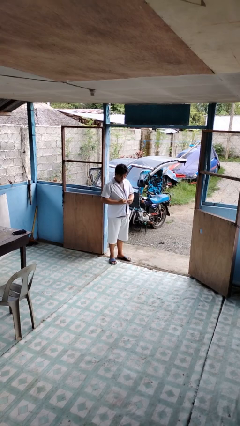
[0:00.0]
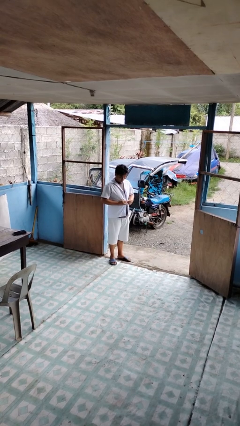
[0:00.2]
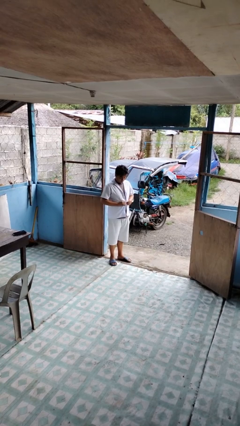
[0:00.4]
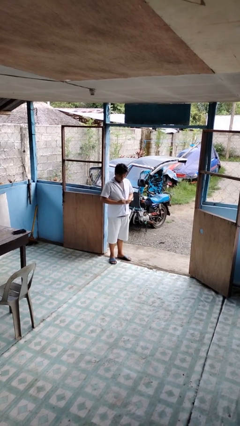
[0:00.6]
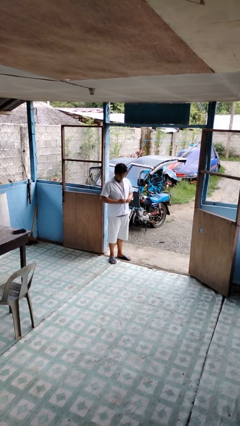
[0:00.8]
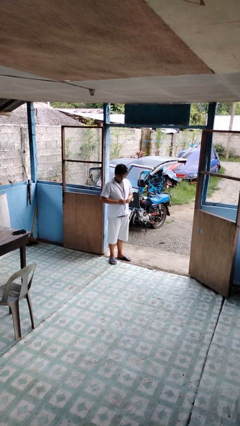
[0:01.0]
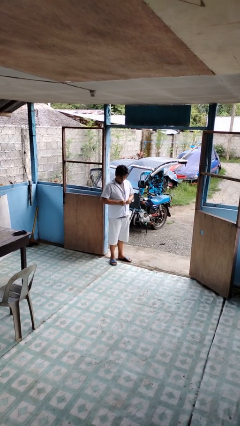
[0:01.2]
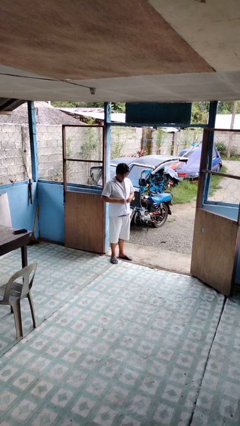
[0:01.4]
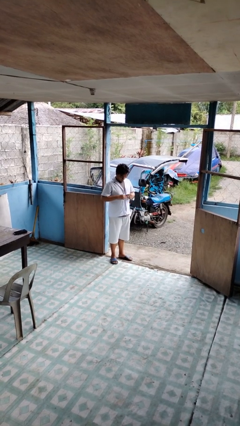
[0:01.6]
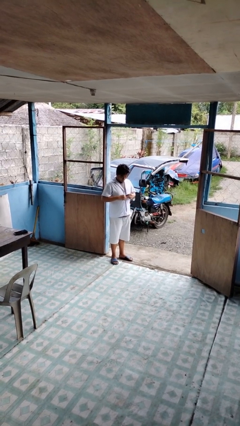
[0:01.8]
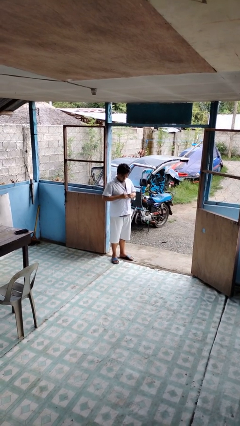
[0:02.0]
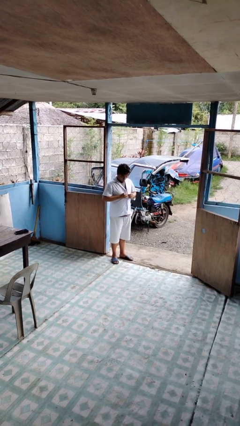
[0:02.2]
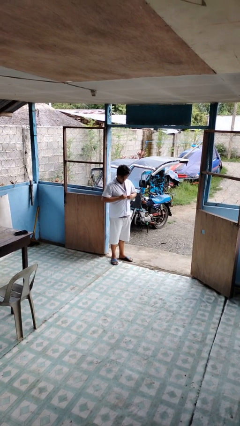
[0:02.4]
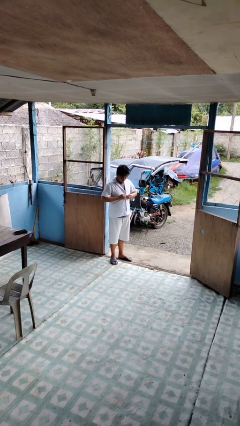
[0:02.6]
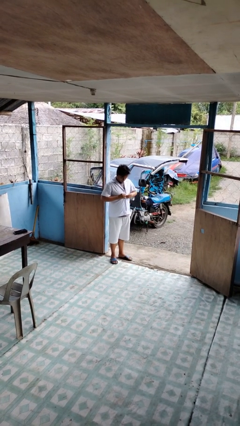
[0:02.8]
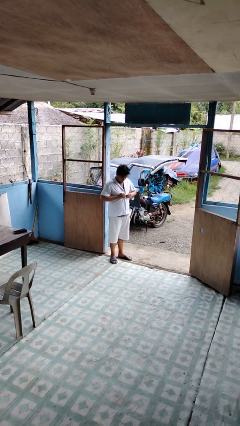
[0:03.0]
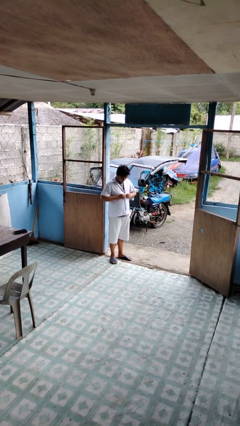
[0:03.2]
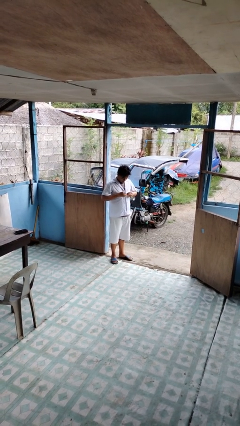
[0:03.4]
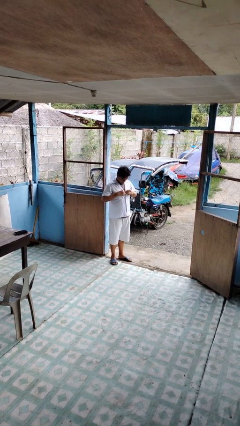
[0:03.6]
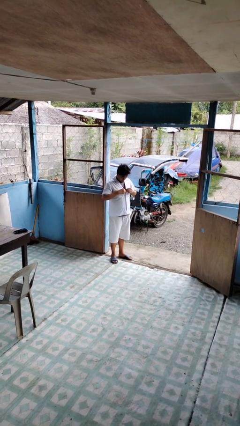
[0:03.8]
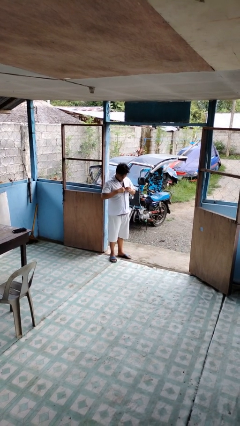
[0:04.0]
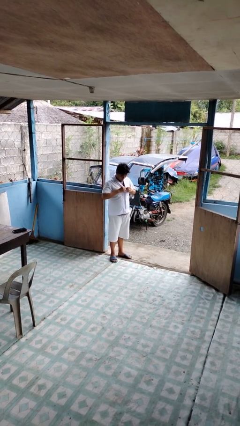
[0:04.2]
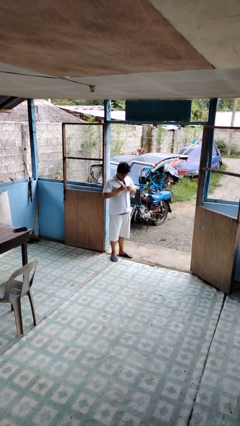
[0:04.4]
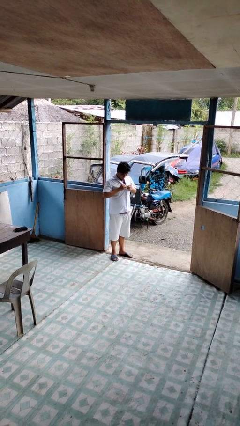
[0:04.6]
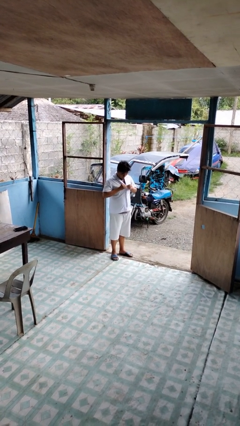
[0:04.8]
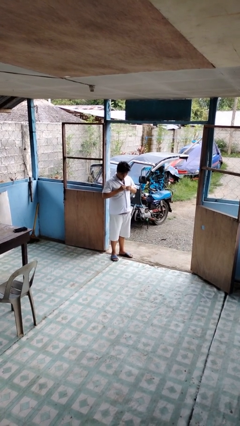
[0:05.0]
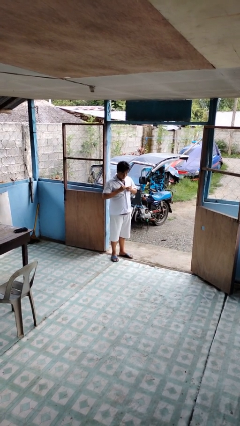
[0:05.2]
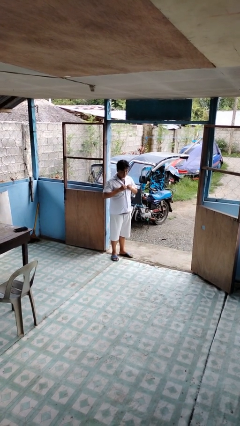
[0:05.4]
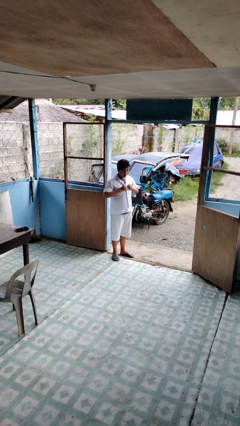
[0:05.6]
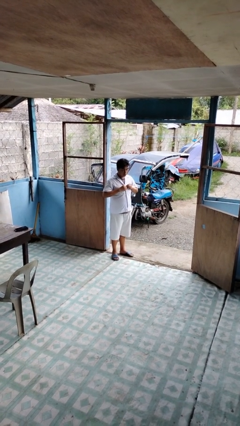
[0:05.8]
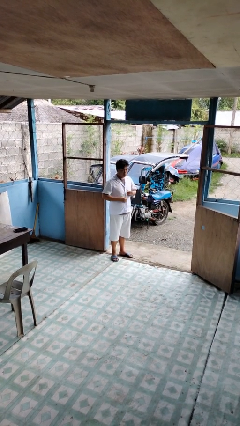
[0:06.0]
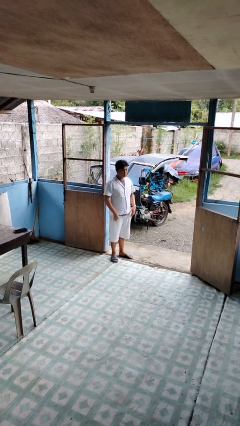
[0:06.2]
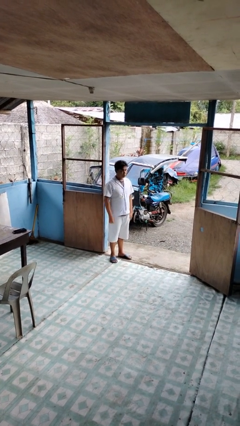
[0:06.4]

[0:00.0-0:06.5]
person buttons shirt

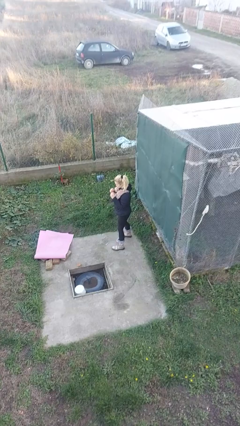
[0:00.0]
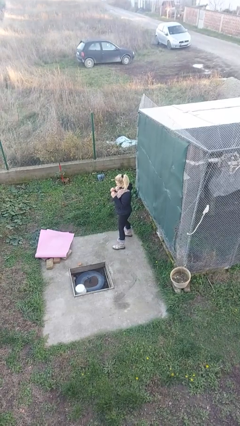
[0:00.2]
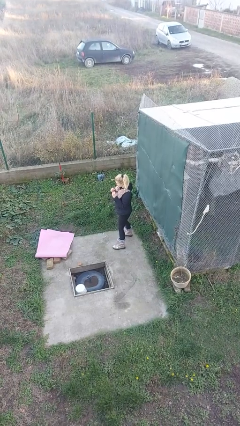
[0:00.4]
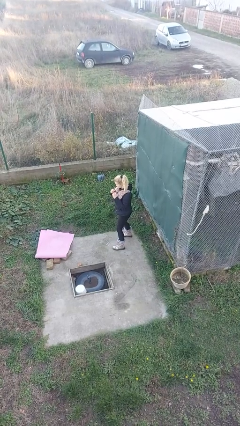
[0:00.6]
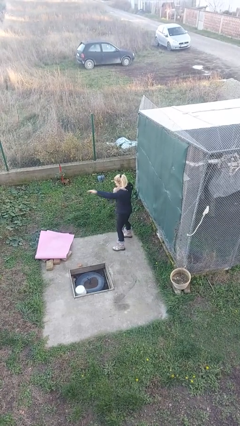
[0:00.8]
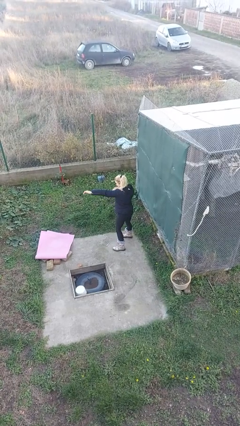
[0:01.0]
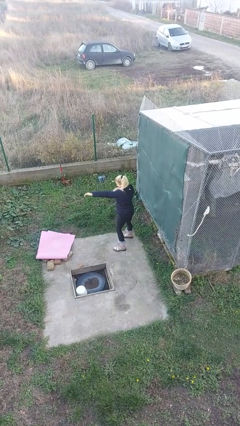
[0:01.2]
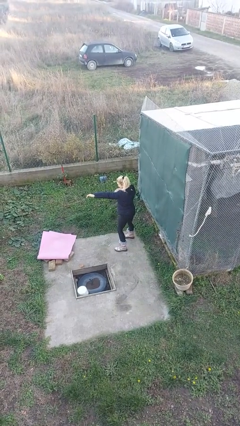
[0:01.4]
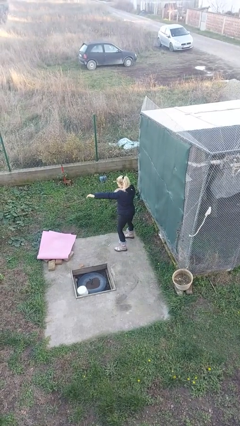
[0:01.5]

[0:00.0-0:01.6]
person punches

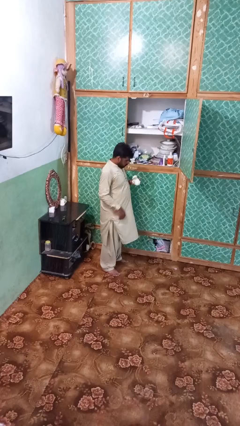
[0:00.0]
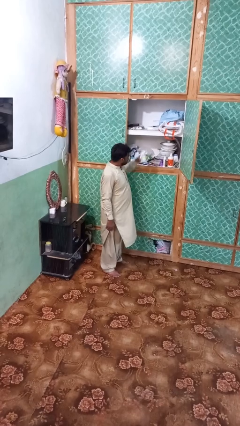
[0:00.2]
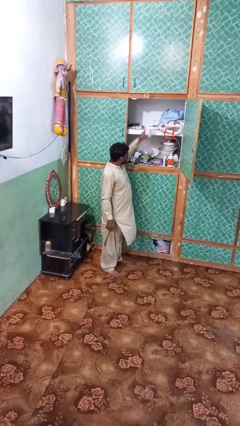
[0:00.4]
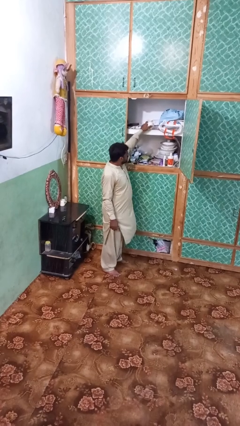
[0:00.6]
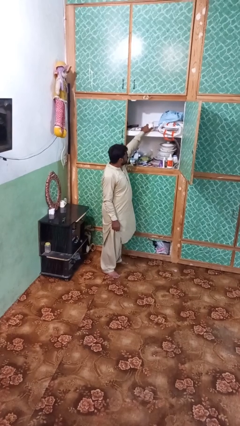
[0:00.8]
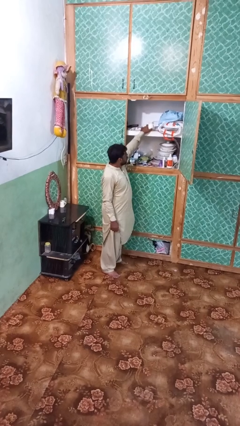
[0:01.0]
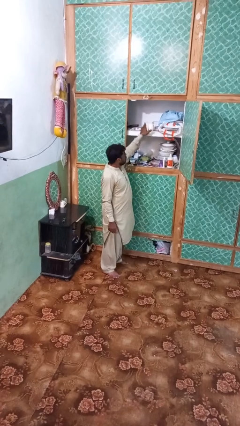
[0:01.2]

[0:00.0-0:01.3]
person puts down object on shelf

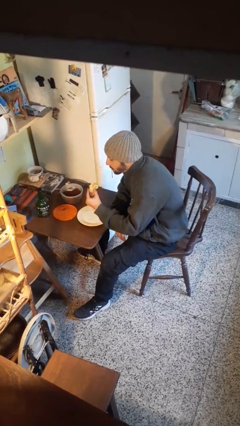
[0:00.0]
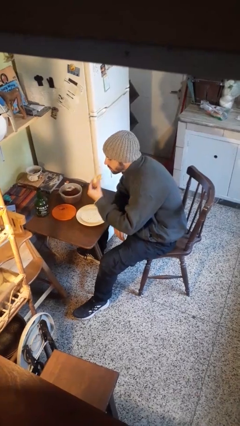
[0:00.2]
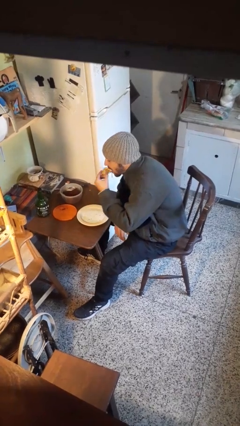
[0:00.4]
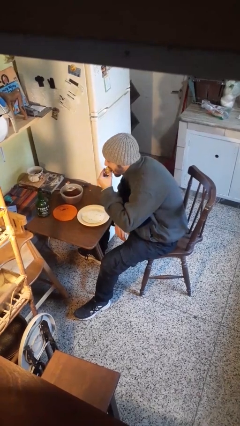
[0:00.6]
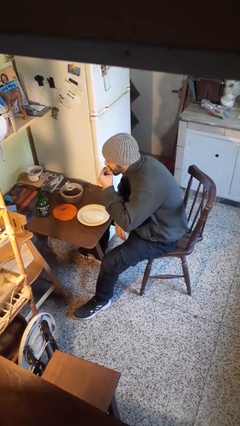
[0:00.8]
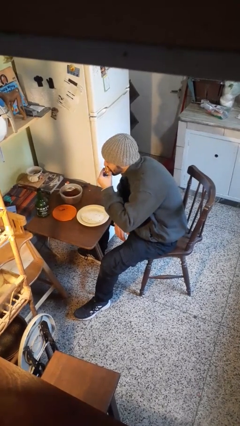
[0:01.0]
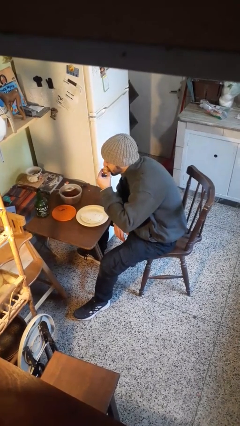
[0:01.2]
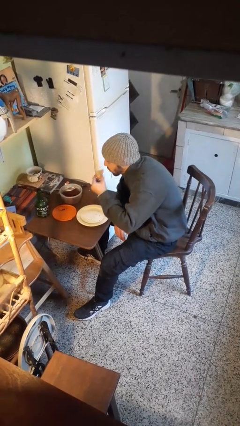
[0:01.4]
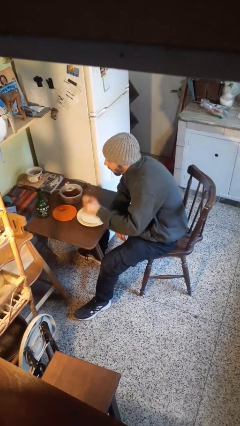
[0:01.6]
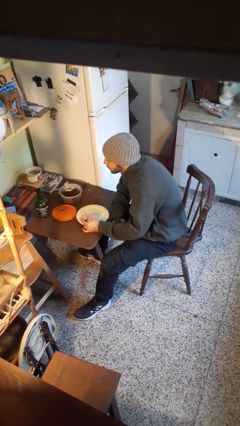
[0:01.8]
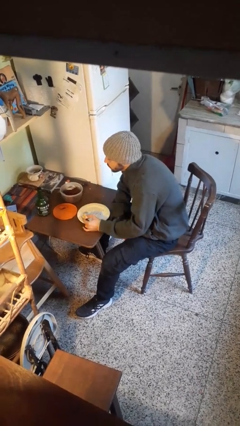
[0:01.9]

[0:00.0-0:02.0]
person eats with hands

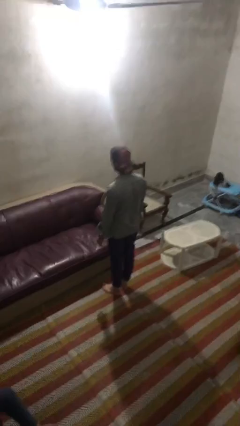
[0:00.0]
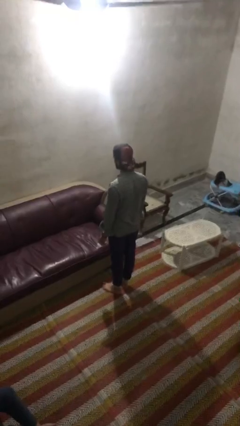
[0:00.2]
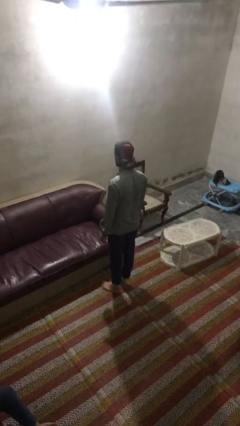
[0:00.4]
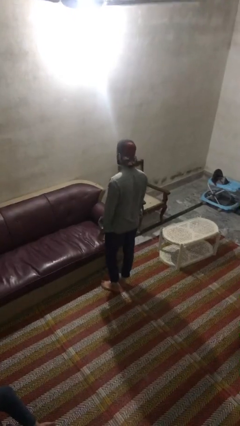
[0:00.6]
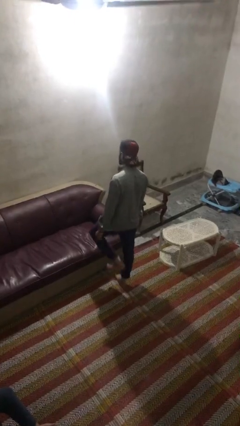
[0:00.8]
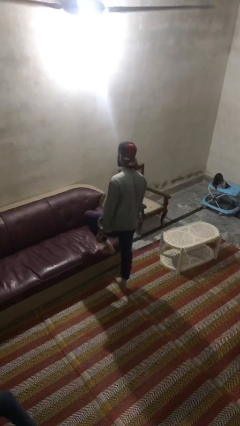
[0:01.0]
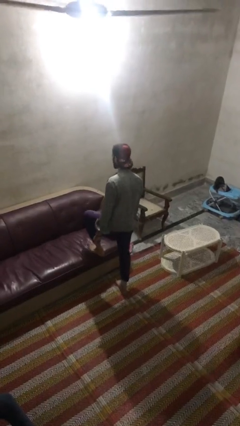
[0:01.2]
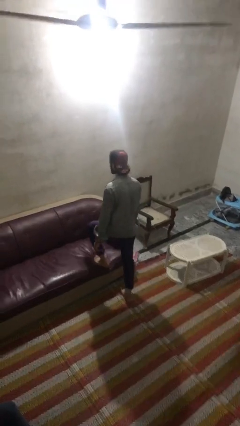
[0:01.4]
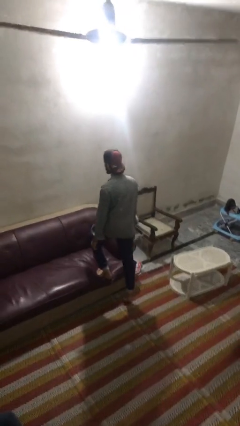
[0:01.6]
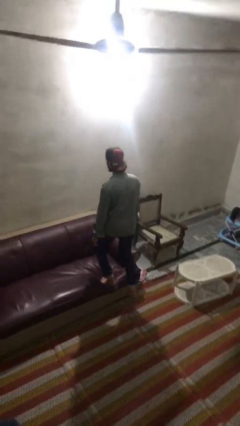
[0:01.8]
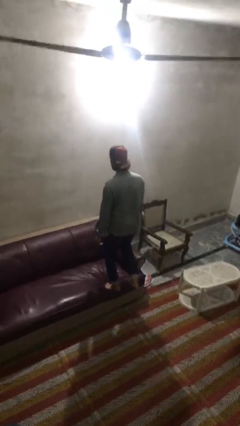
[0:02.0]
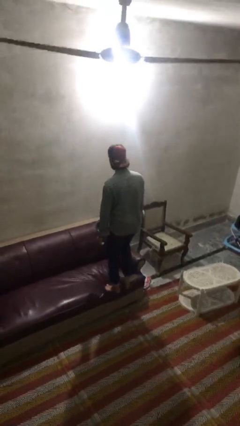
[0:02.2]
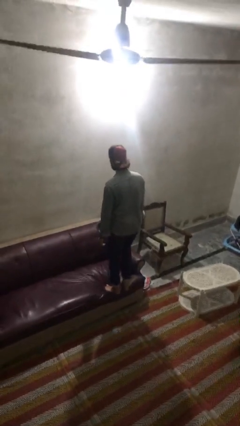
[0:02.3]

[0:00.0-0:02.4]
person climbs on couch

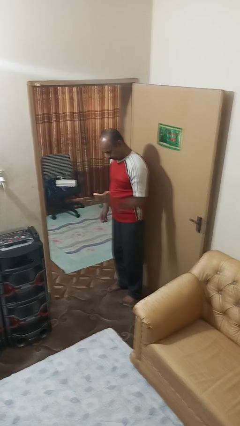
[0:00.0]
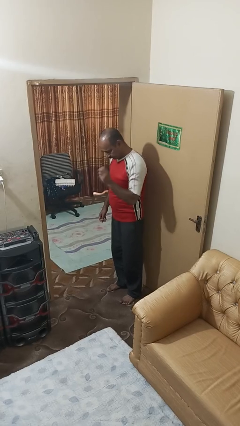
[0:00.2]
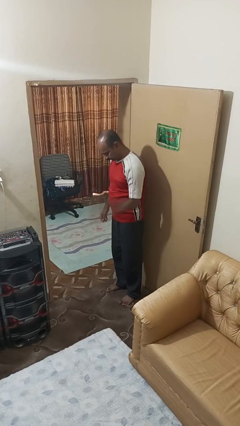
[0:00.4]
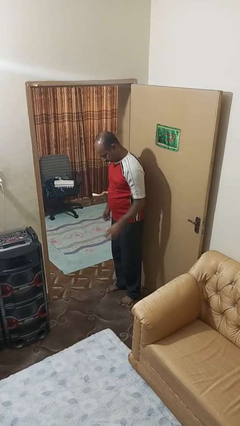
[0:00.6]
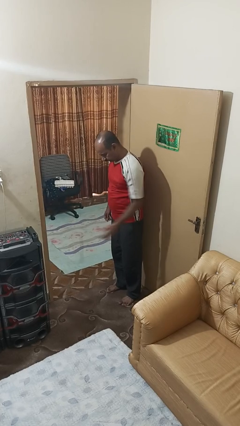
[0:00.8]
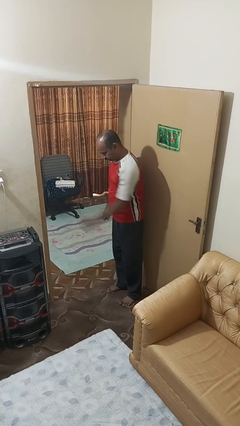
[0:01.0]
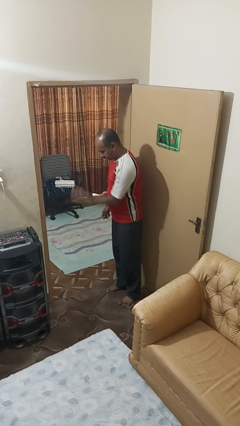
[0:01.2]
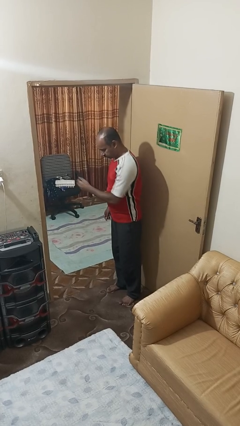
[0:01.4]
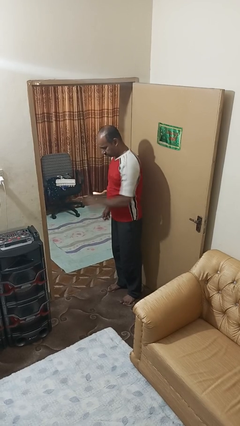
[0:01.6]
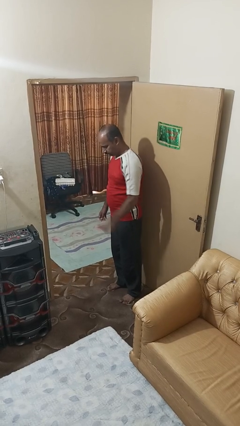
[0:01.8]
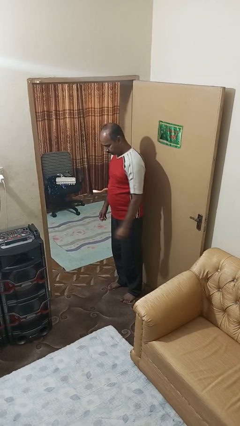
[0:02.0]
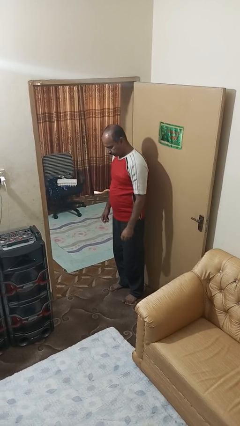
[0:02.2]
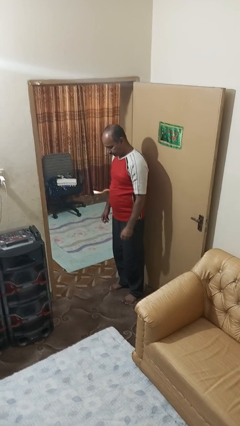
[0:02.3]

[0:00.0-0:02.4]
person bounces ball on floor

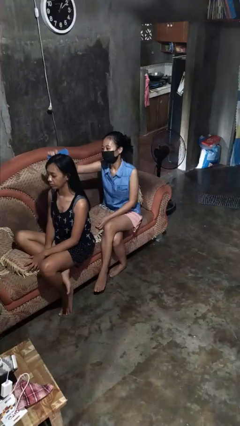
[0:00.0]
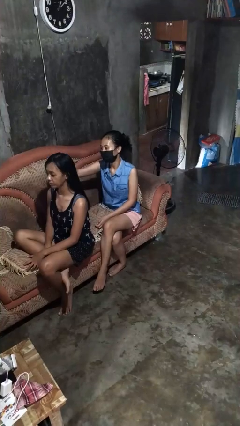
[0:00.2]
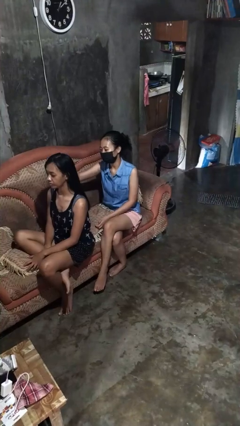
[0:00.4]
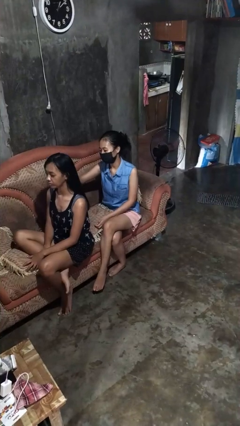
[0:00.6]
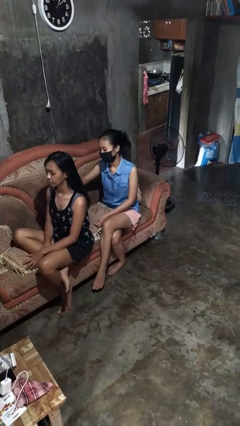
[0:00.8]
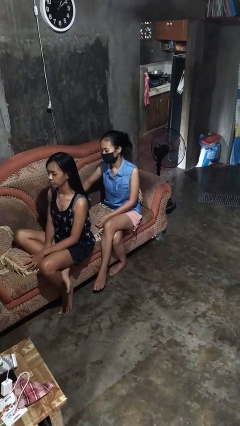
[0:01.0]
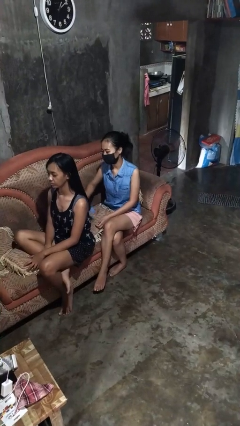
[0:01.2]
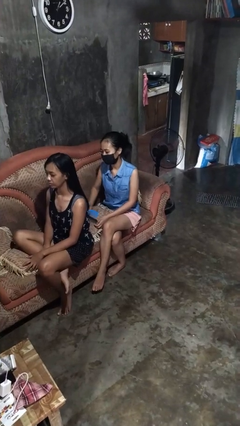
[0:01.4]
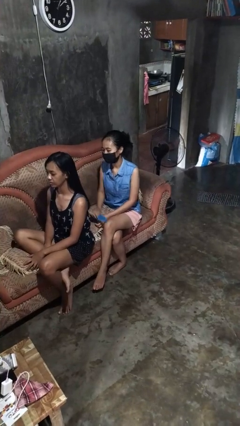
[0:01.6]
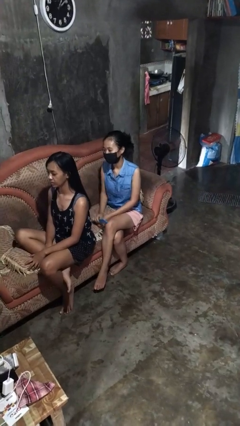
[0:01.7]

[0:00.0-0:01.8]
person brushes hair of person
